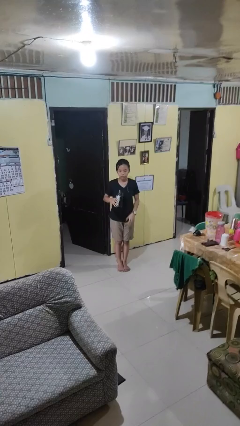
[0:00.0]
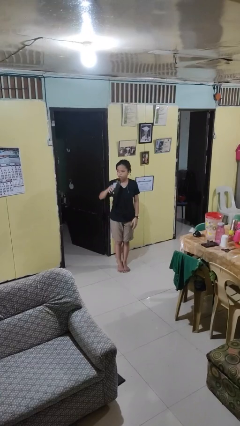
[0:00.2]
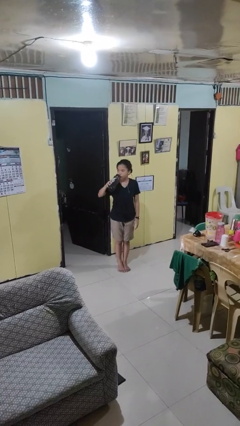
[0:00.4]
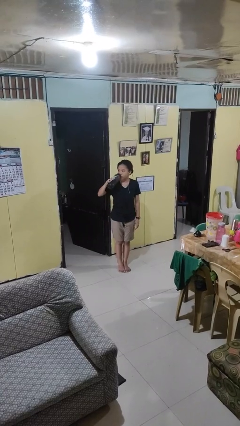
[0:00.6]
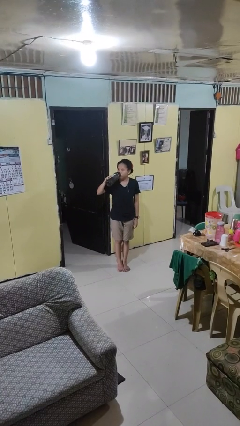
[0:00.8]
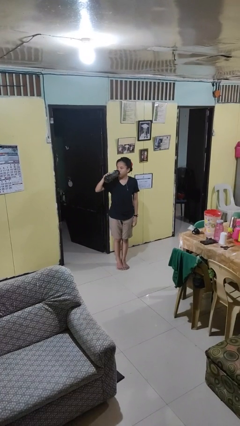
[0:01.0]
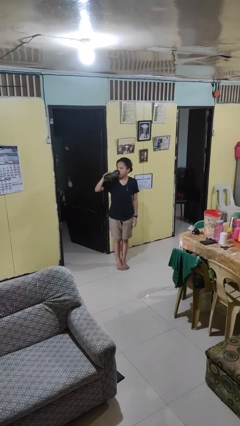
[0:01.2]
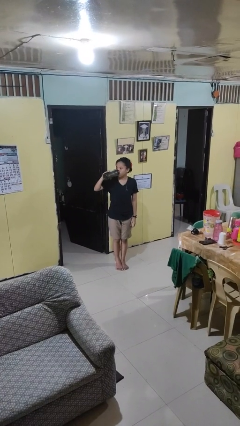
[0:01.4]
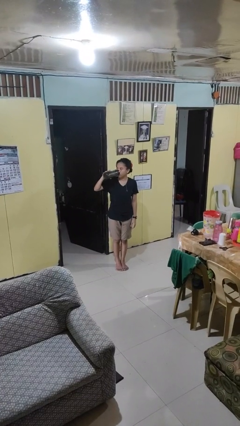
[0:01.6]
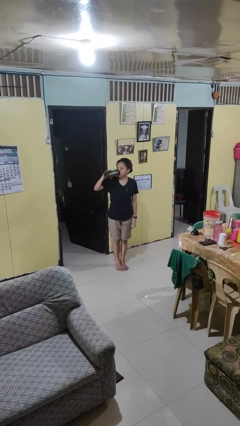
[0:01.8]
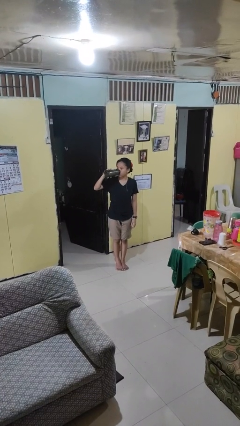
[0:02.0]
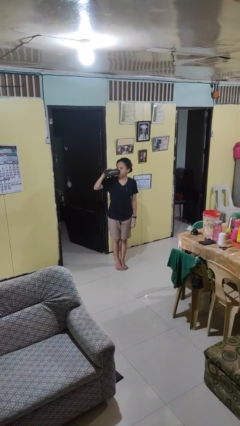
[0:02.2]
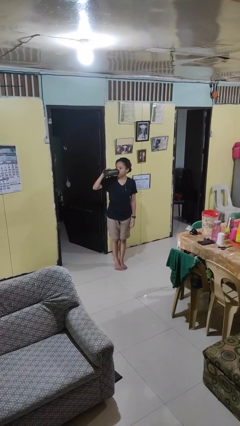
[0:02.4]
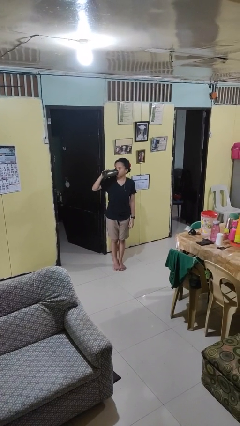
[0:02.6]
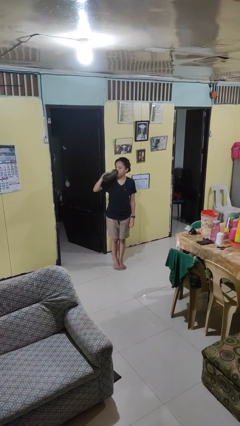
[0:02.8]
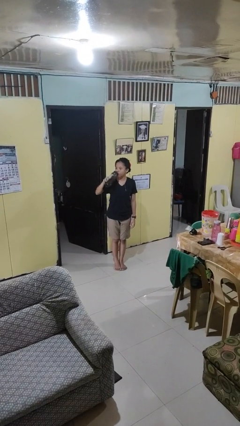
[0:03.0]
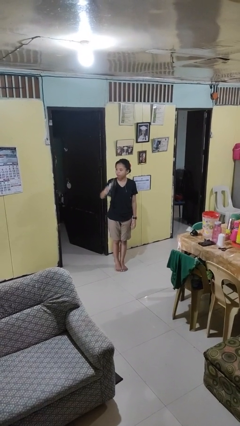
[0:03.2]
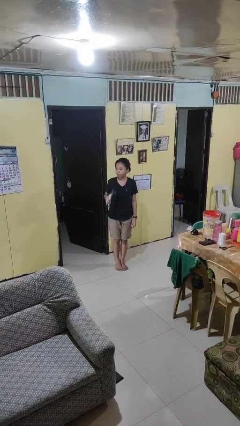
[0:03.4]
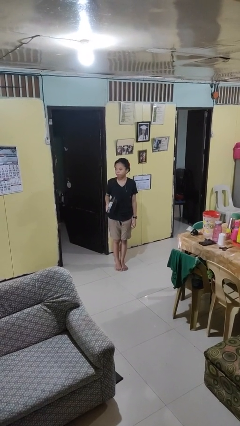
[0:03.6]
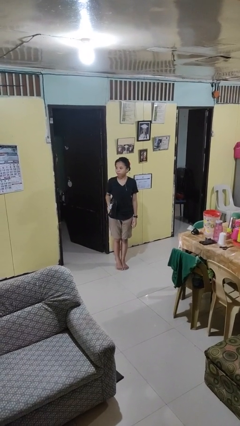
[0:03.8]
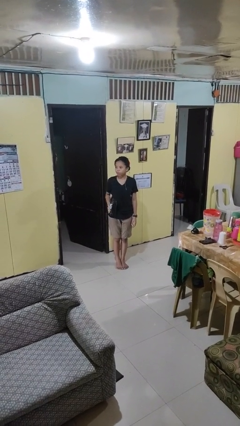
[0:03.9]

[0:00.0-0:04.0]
person drinks from bottle

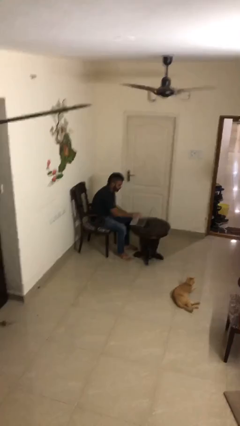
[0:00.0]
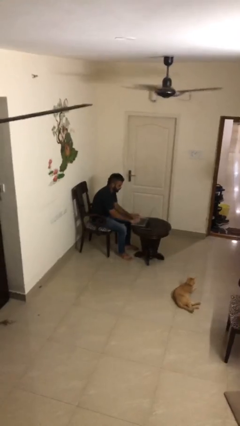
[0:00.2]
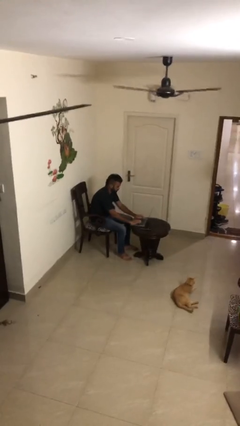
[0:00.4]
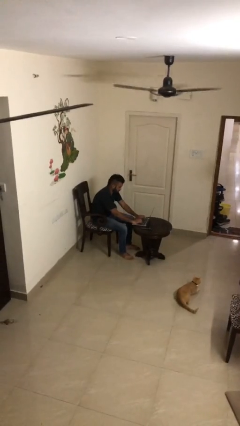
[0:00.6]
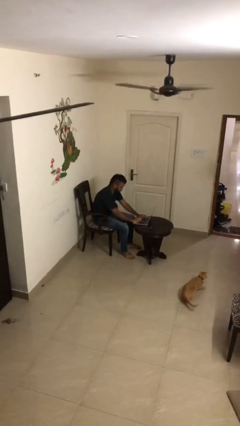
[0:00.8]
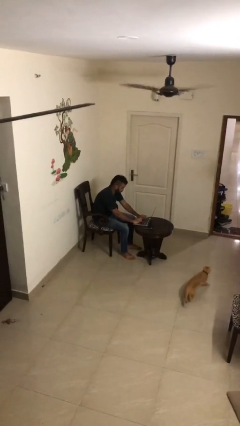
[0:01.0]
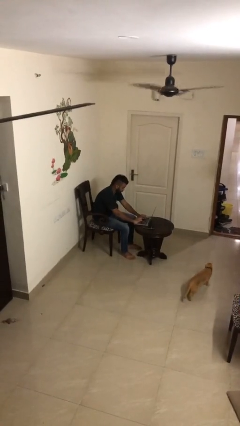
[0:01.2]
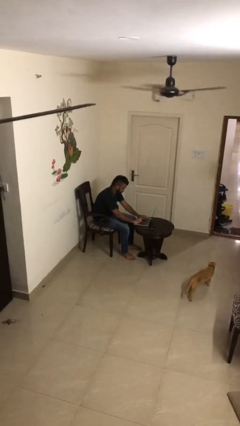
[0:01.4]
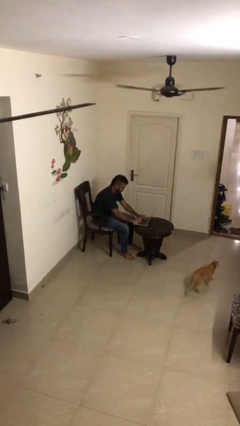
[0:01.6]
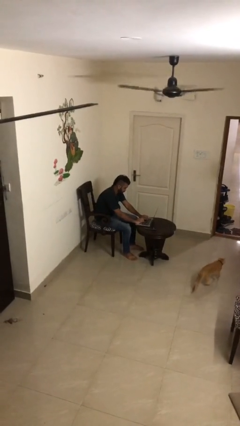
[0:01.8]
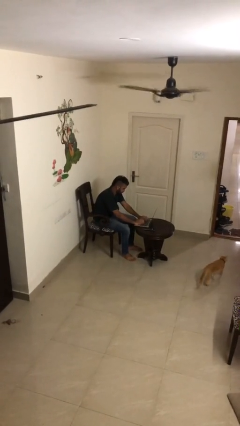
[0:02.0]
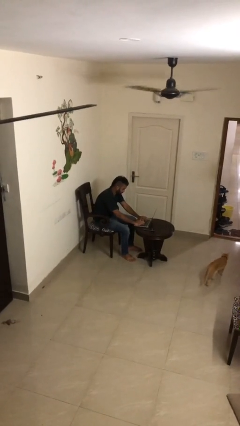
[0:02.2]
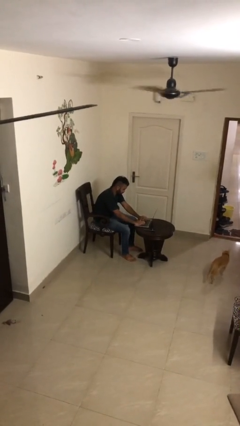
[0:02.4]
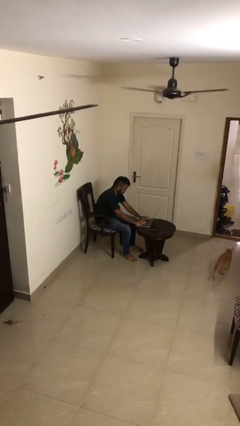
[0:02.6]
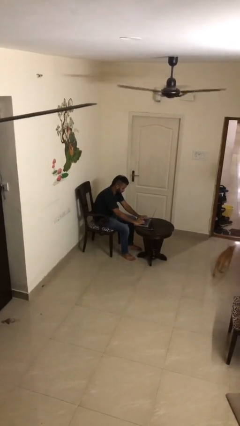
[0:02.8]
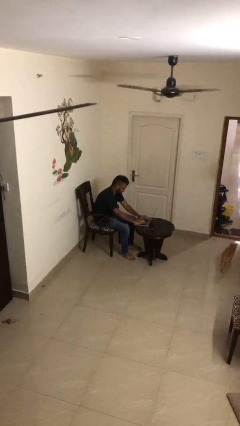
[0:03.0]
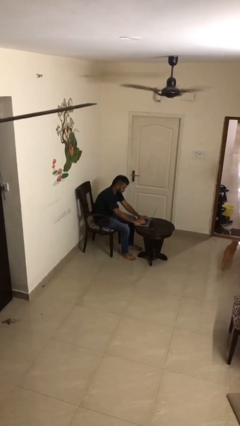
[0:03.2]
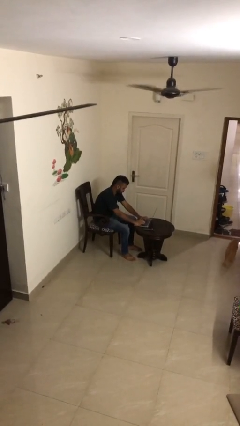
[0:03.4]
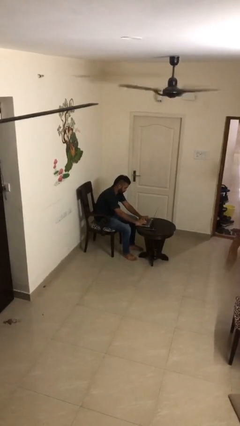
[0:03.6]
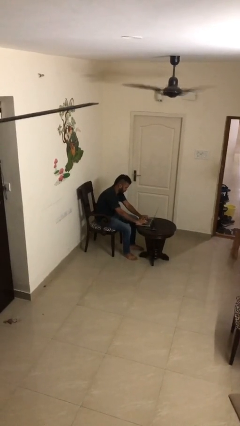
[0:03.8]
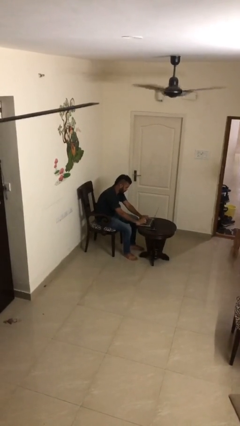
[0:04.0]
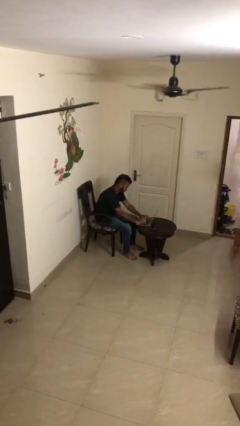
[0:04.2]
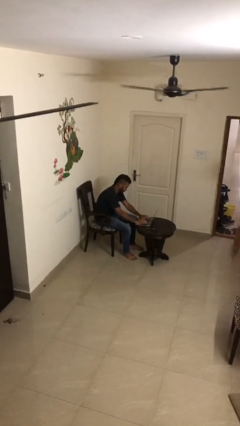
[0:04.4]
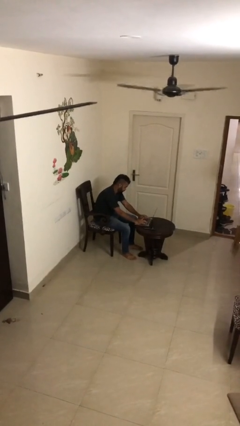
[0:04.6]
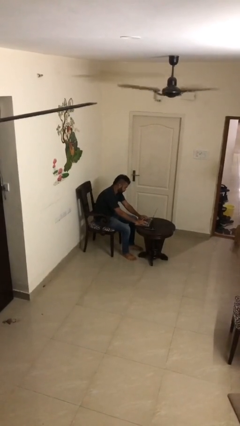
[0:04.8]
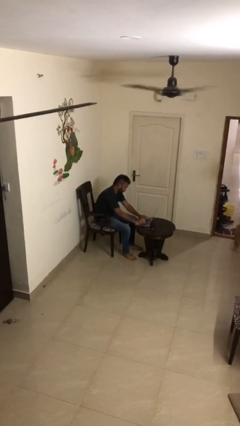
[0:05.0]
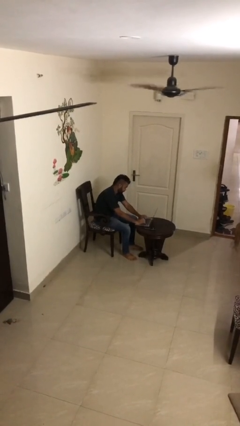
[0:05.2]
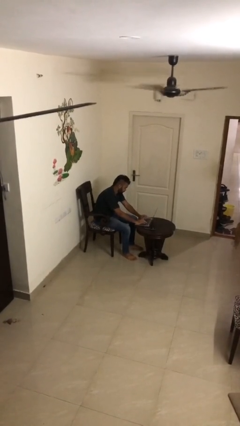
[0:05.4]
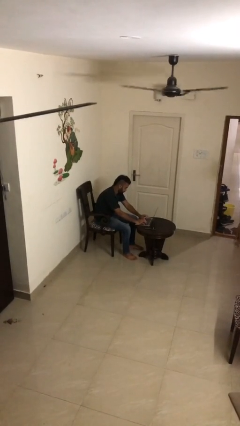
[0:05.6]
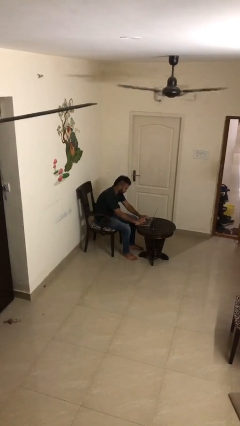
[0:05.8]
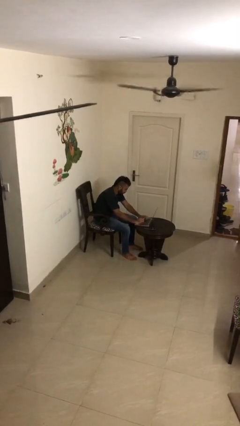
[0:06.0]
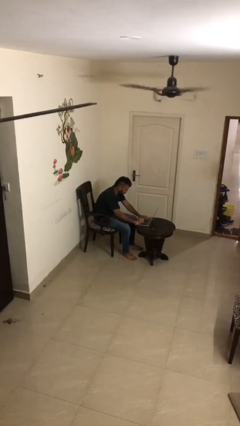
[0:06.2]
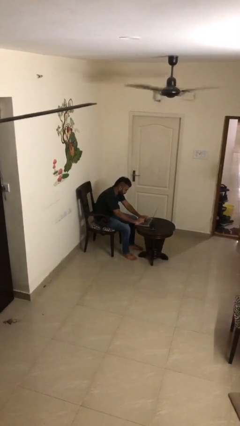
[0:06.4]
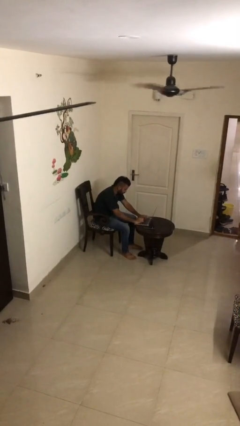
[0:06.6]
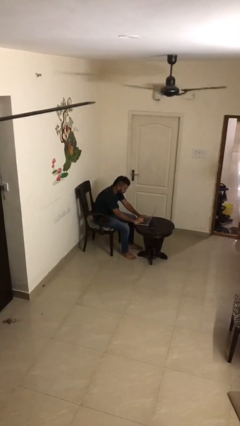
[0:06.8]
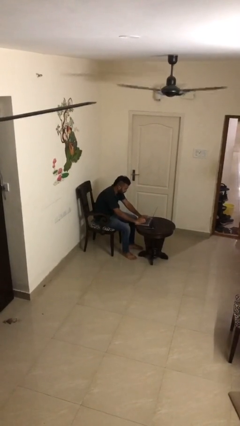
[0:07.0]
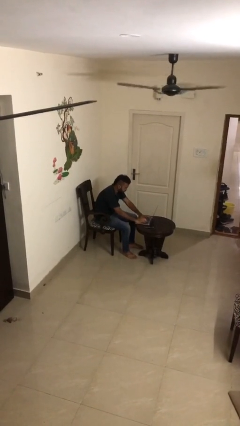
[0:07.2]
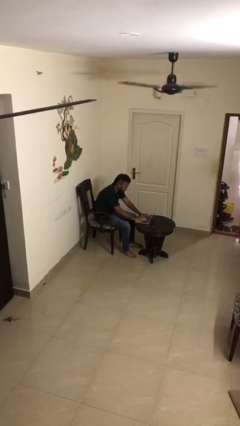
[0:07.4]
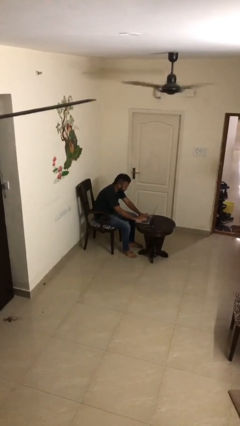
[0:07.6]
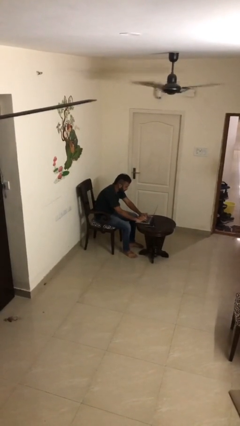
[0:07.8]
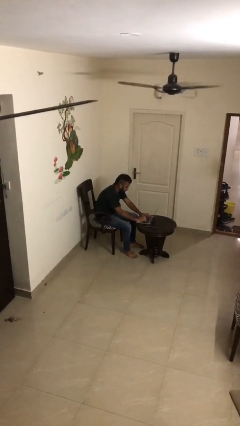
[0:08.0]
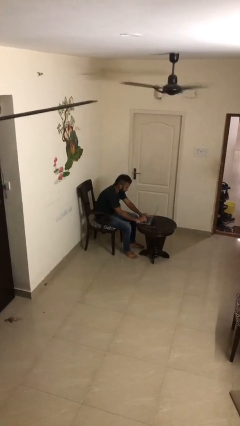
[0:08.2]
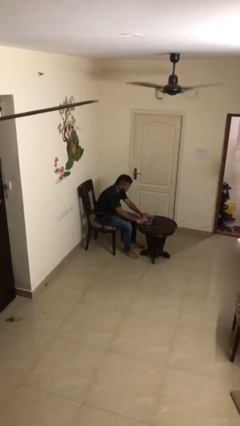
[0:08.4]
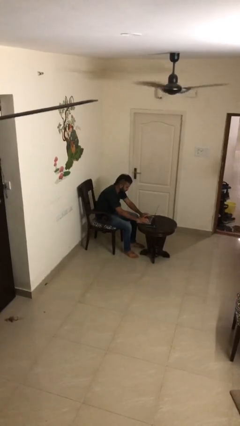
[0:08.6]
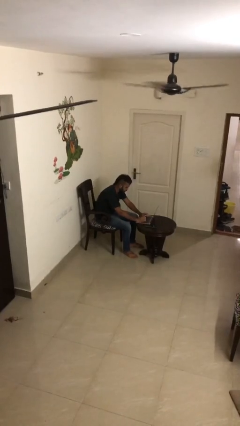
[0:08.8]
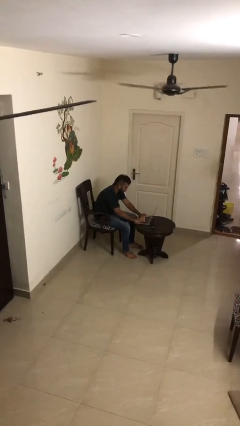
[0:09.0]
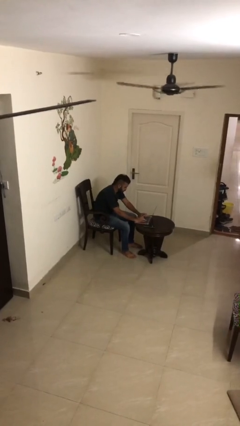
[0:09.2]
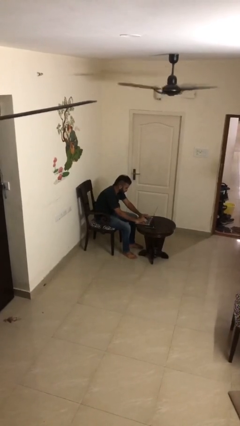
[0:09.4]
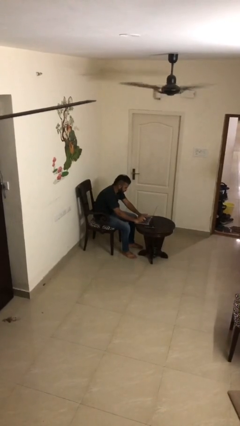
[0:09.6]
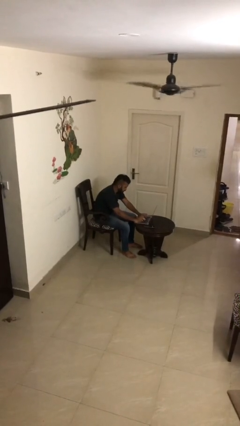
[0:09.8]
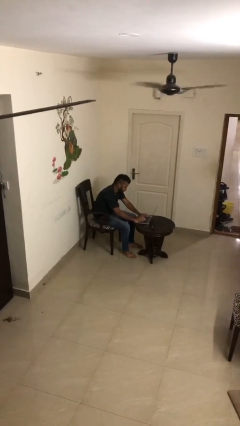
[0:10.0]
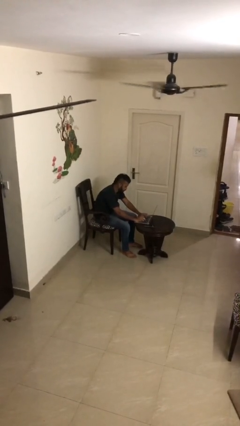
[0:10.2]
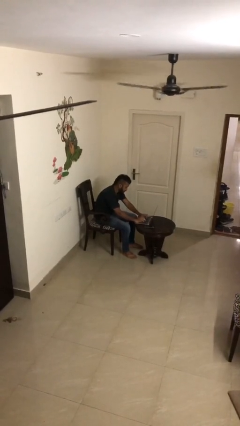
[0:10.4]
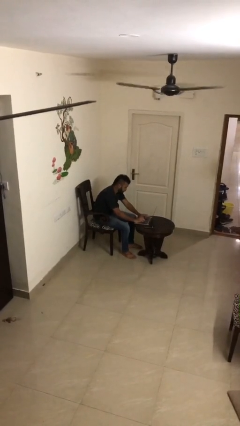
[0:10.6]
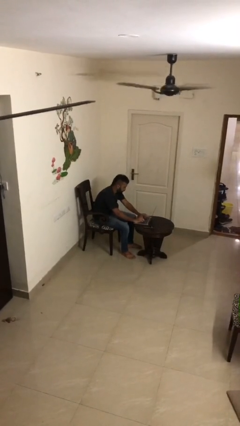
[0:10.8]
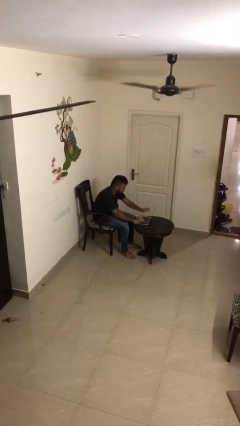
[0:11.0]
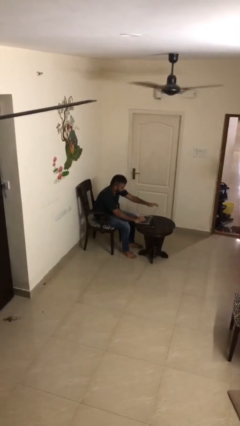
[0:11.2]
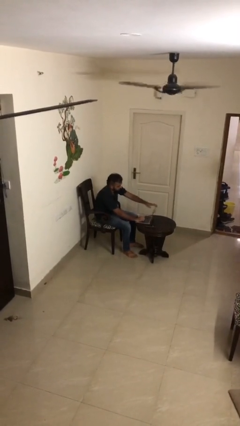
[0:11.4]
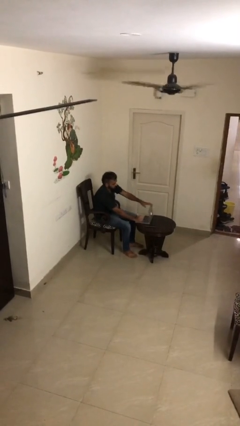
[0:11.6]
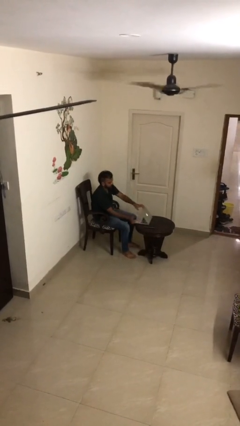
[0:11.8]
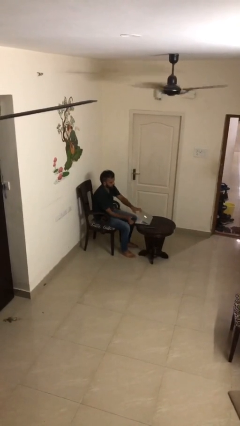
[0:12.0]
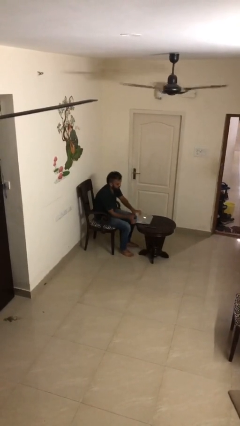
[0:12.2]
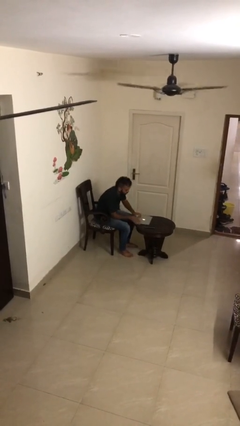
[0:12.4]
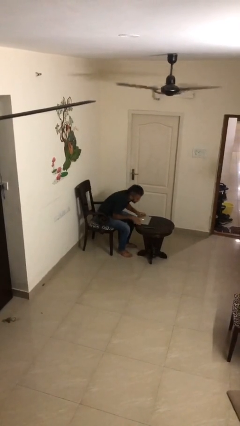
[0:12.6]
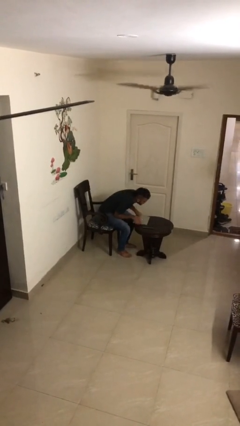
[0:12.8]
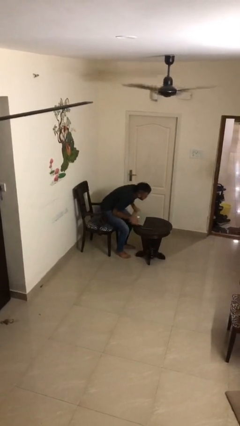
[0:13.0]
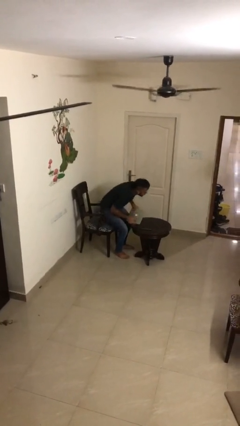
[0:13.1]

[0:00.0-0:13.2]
person interacts with laptop

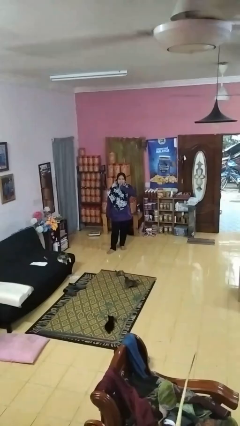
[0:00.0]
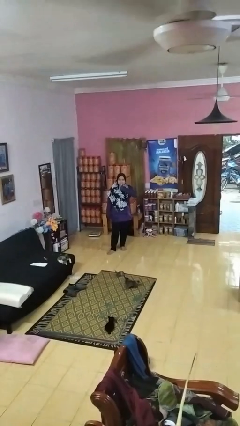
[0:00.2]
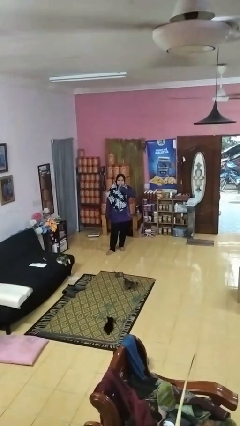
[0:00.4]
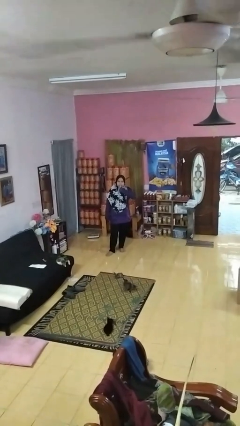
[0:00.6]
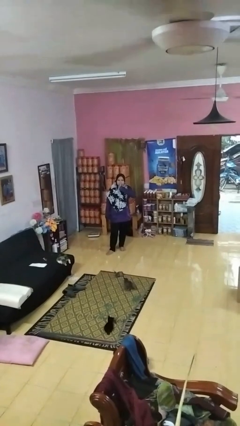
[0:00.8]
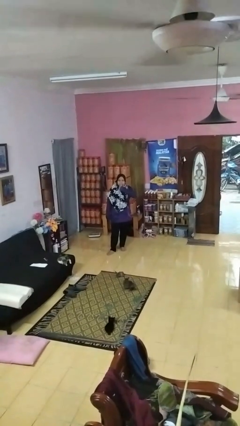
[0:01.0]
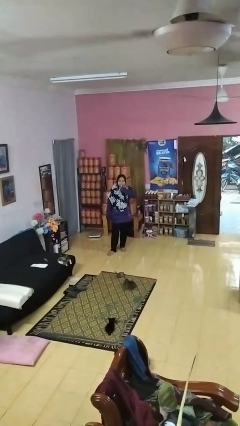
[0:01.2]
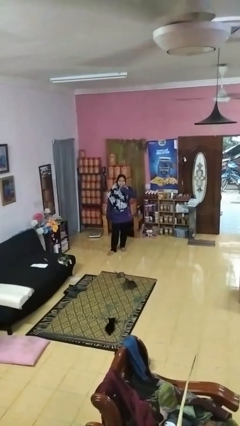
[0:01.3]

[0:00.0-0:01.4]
person gestures be quiet
